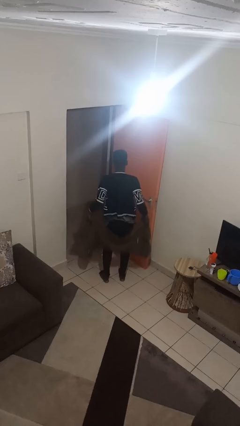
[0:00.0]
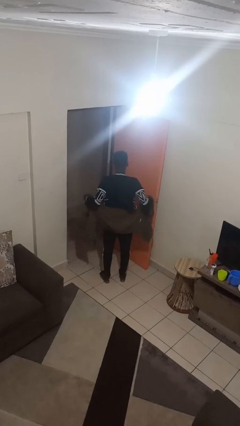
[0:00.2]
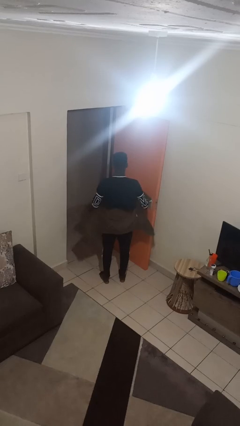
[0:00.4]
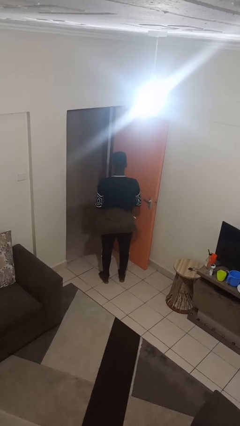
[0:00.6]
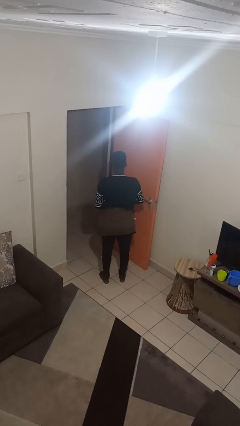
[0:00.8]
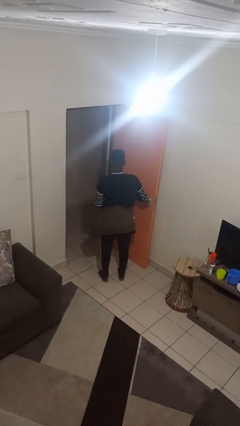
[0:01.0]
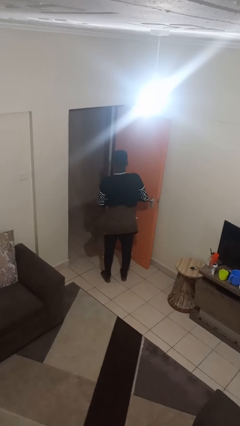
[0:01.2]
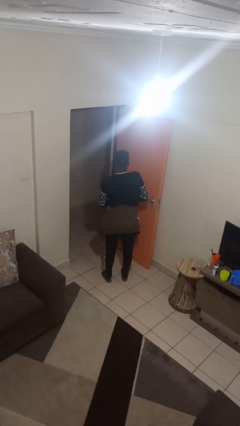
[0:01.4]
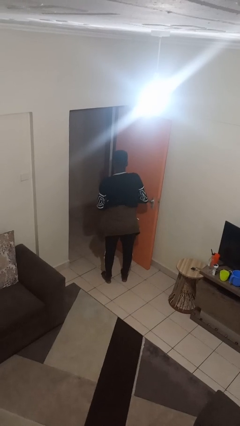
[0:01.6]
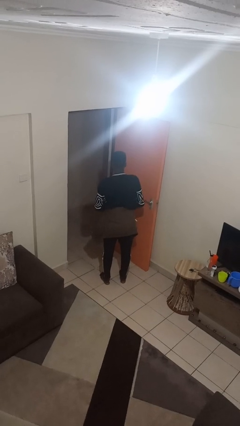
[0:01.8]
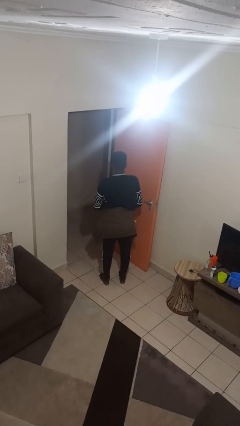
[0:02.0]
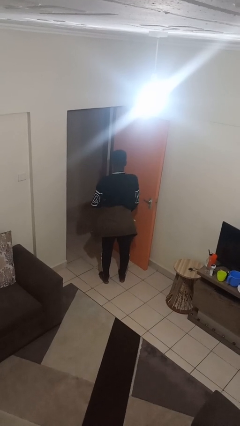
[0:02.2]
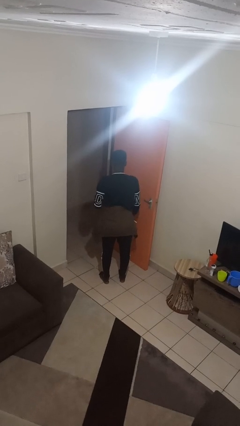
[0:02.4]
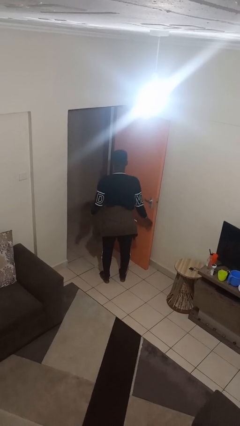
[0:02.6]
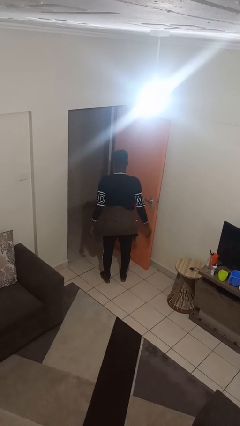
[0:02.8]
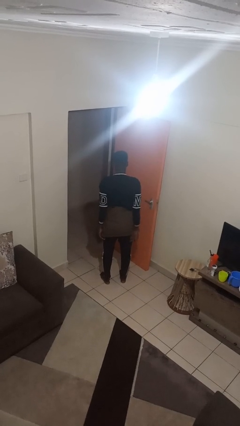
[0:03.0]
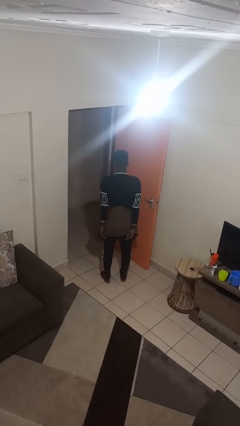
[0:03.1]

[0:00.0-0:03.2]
person ties jacket around waist

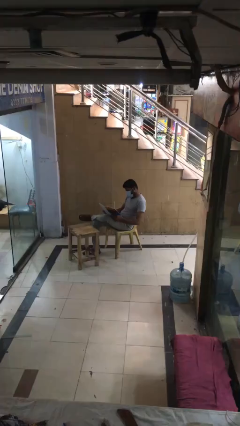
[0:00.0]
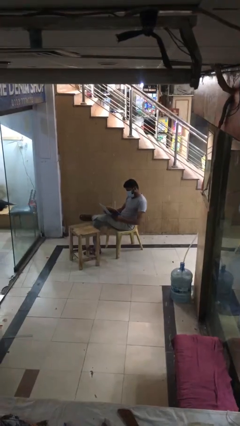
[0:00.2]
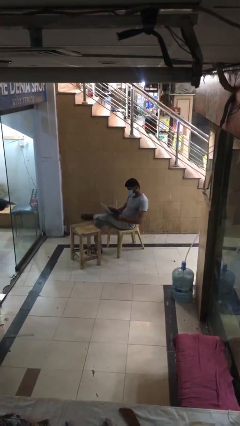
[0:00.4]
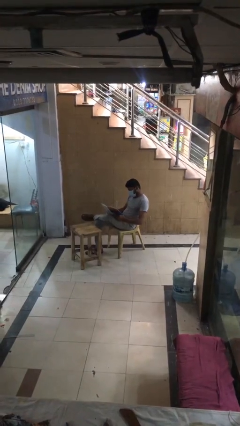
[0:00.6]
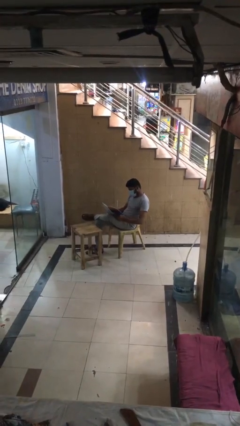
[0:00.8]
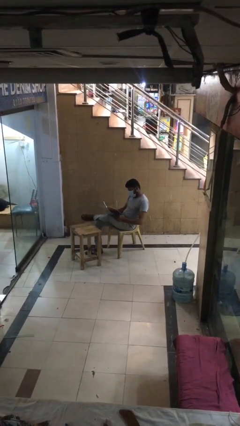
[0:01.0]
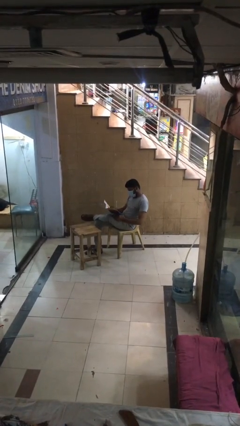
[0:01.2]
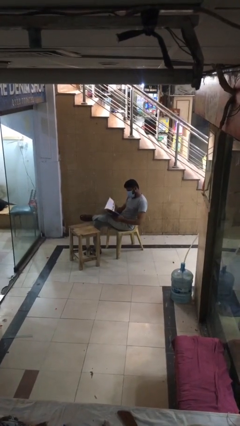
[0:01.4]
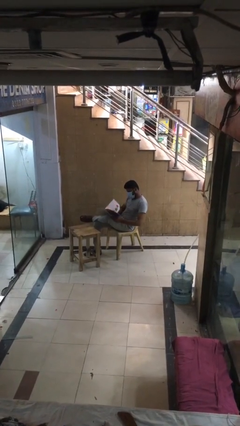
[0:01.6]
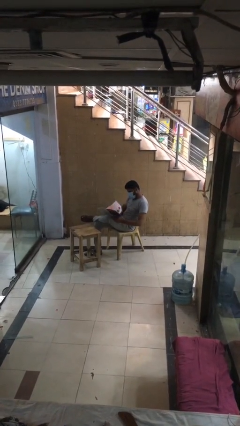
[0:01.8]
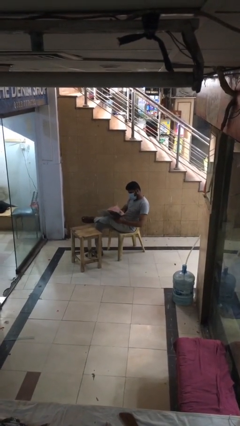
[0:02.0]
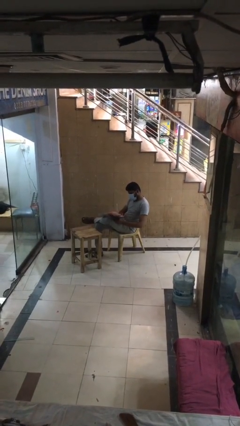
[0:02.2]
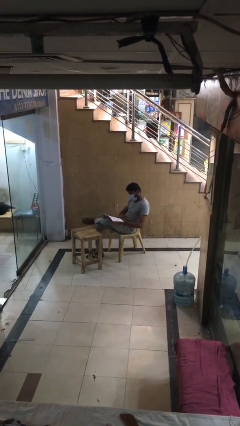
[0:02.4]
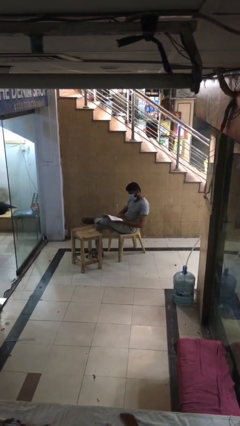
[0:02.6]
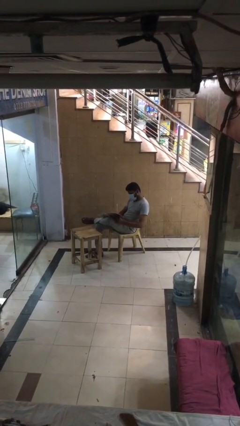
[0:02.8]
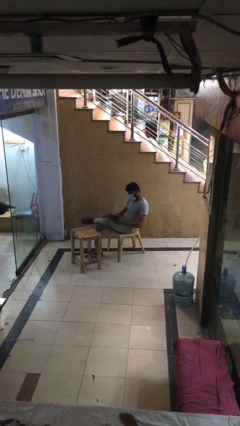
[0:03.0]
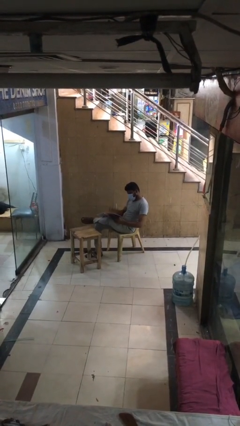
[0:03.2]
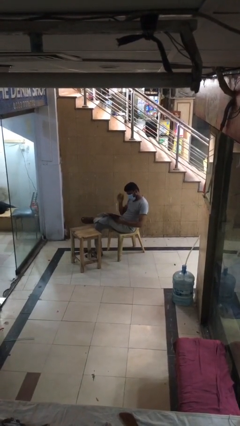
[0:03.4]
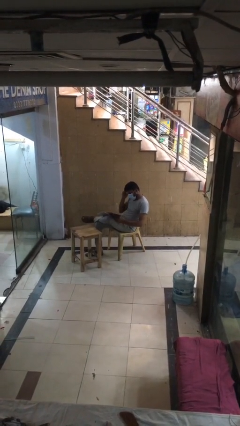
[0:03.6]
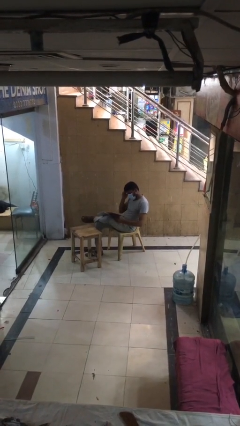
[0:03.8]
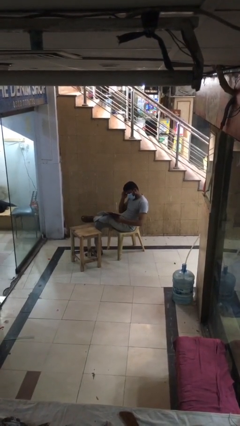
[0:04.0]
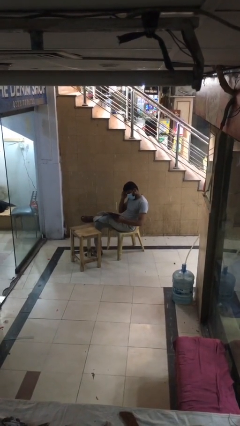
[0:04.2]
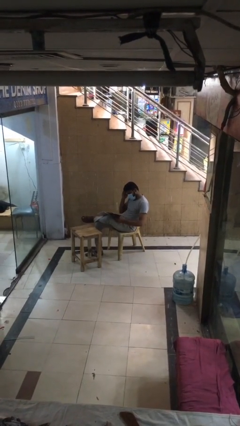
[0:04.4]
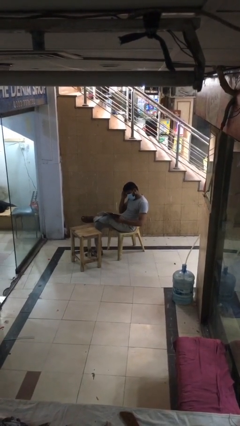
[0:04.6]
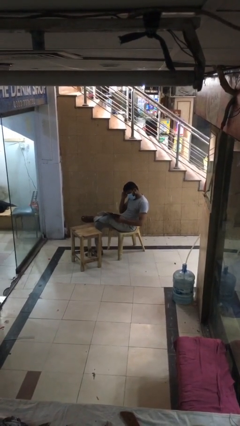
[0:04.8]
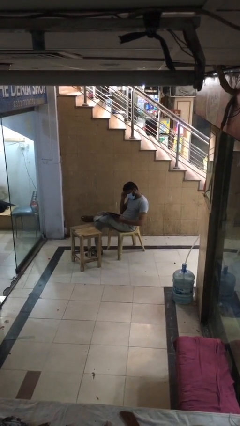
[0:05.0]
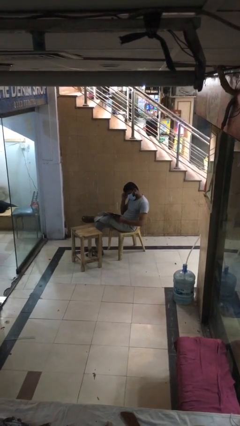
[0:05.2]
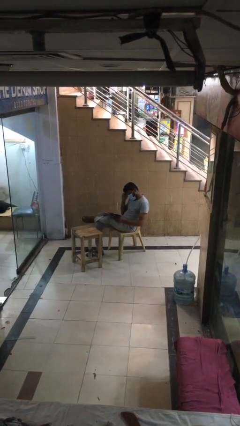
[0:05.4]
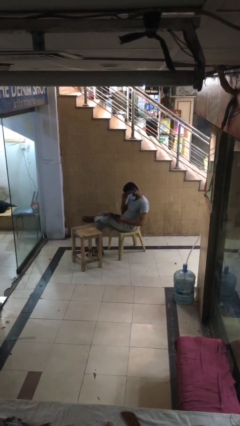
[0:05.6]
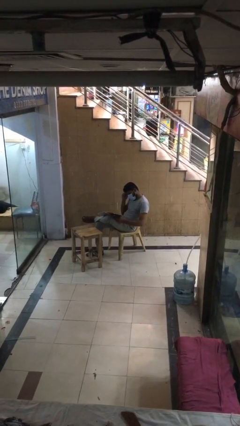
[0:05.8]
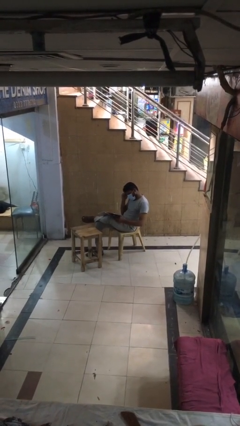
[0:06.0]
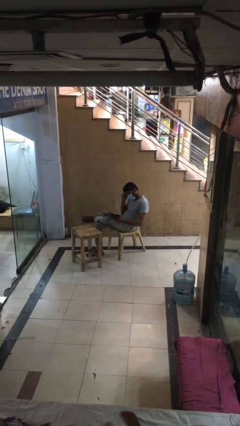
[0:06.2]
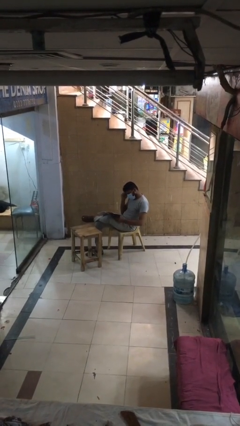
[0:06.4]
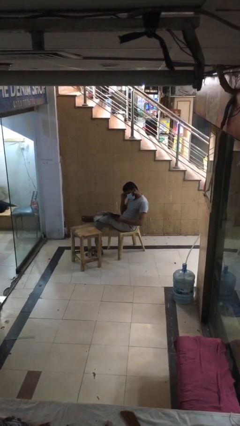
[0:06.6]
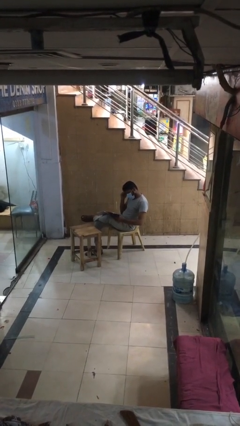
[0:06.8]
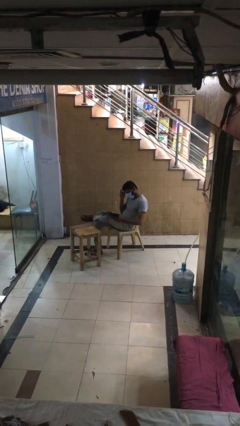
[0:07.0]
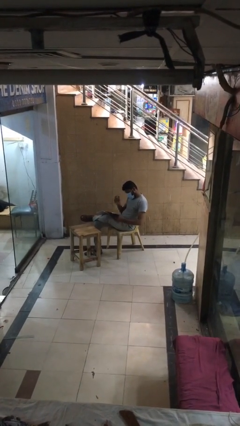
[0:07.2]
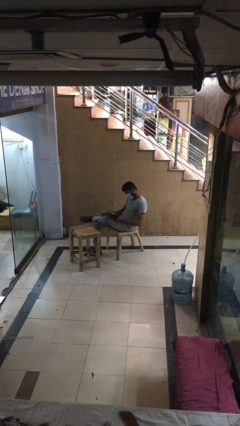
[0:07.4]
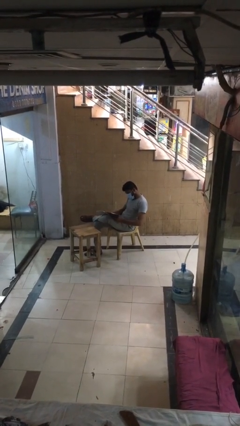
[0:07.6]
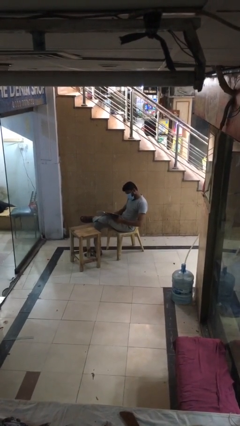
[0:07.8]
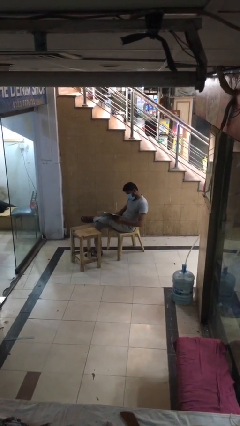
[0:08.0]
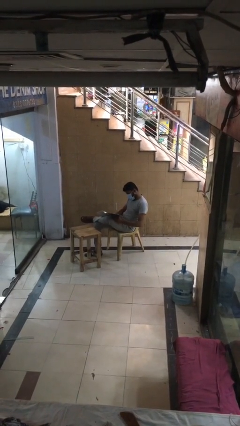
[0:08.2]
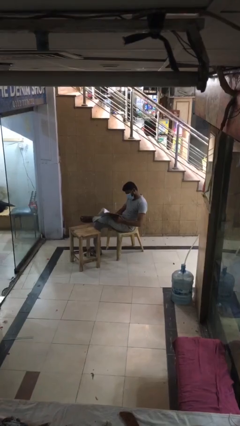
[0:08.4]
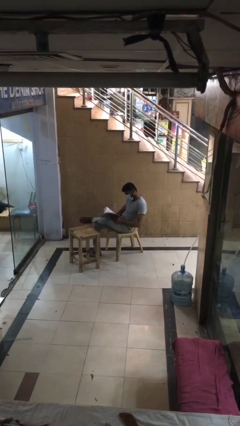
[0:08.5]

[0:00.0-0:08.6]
person reads document

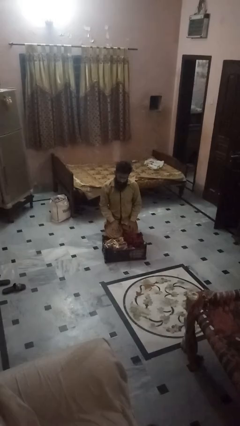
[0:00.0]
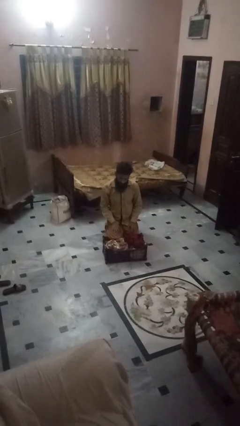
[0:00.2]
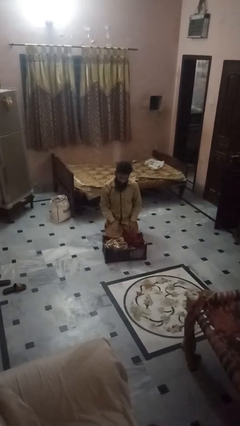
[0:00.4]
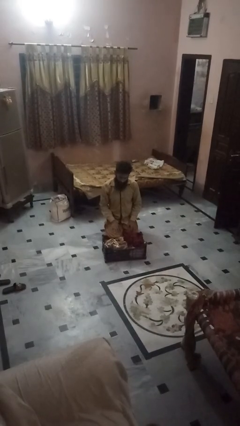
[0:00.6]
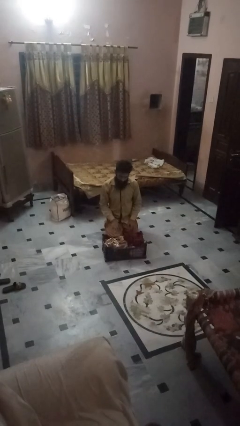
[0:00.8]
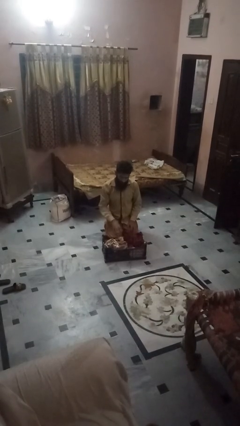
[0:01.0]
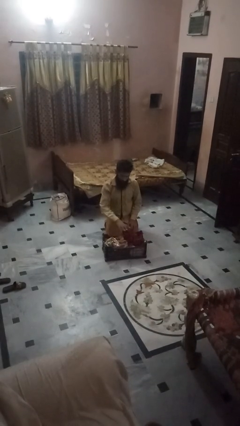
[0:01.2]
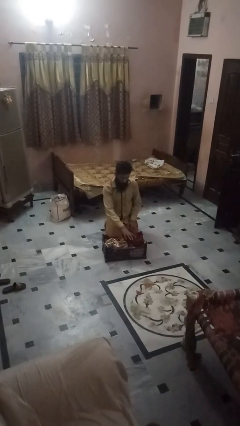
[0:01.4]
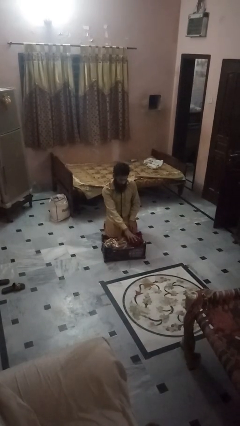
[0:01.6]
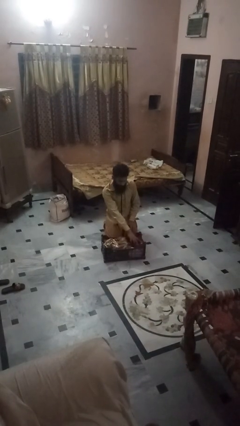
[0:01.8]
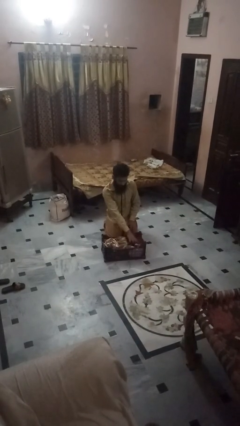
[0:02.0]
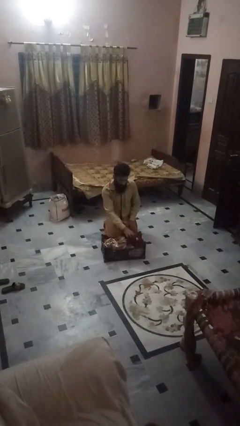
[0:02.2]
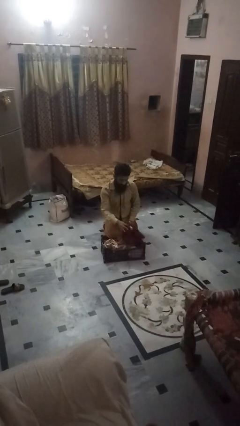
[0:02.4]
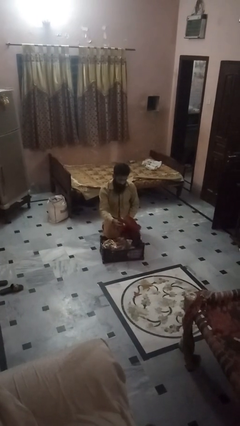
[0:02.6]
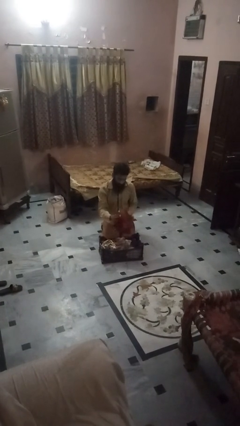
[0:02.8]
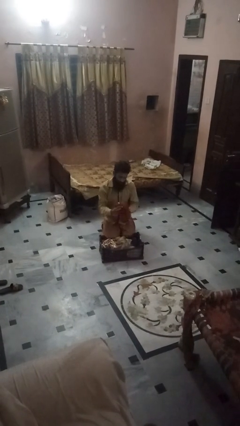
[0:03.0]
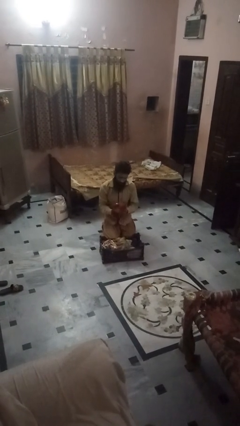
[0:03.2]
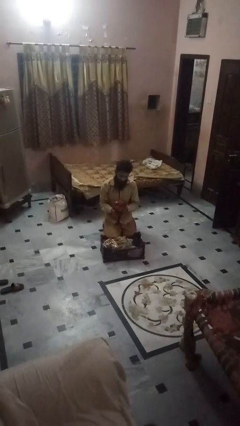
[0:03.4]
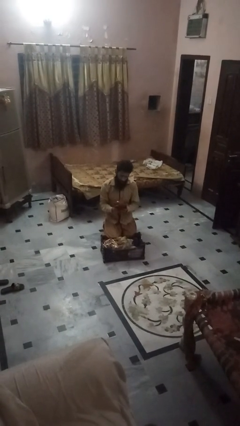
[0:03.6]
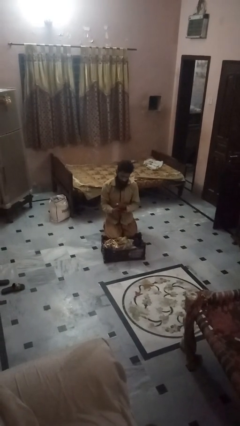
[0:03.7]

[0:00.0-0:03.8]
person puts object into basket

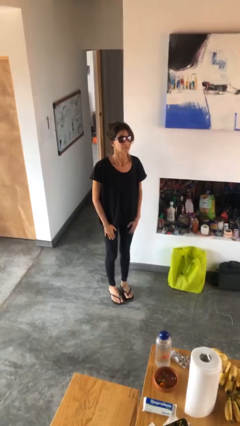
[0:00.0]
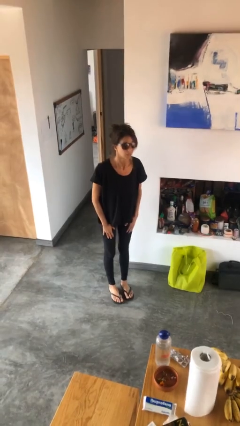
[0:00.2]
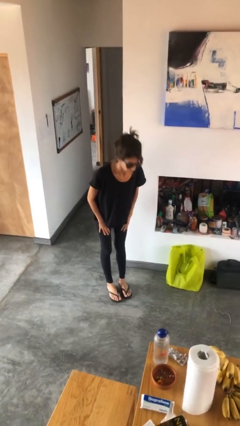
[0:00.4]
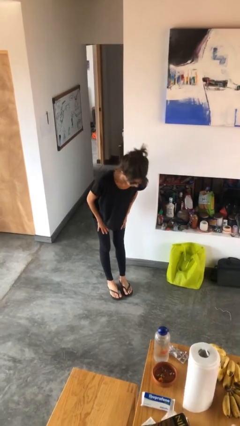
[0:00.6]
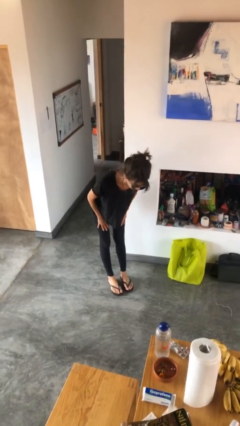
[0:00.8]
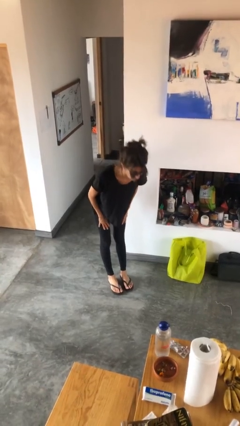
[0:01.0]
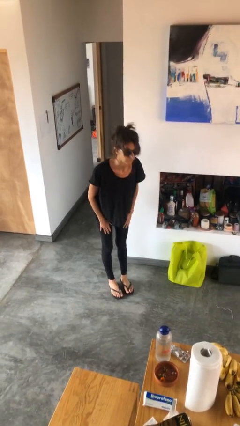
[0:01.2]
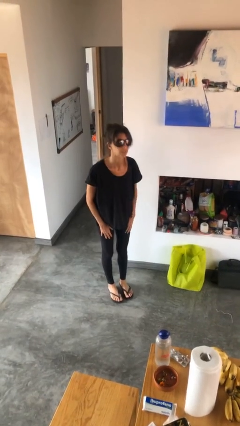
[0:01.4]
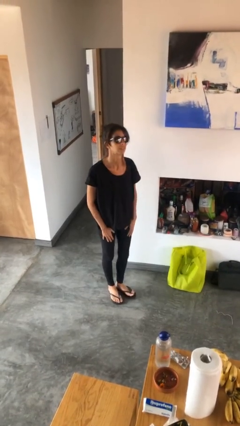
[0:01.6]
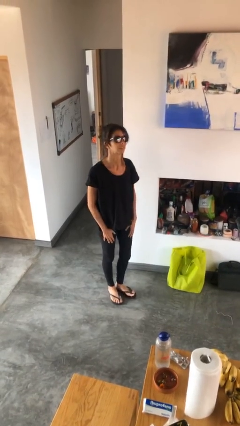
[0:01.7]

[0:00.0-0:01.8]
person bows

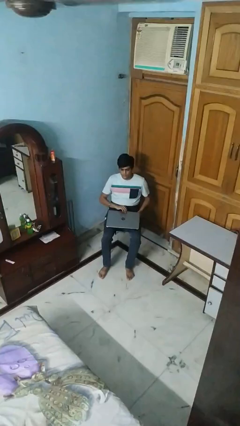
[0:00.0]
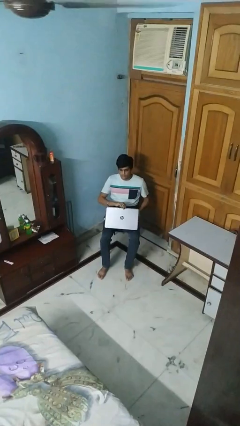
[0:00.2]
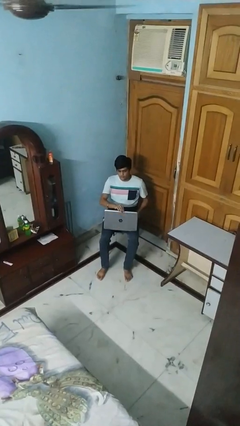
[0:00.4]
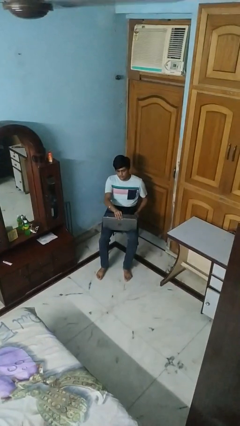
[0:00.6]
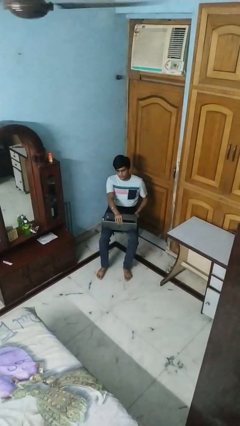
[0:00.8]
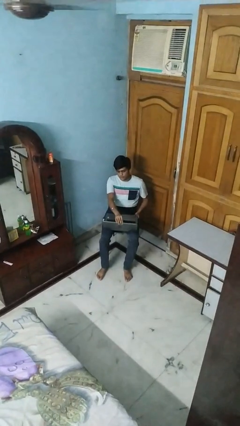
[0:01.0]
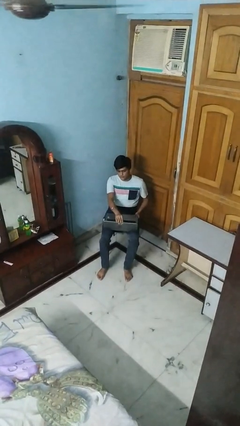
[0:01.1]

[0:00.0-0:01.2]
person opens laptop
